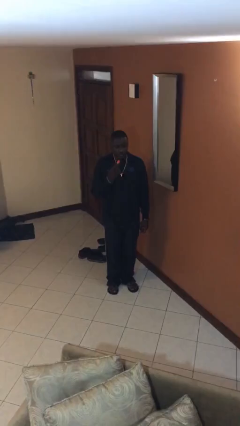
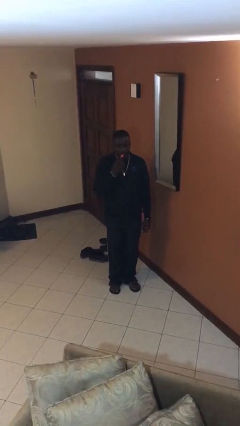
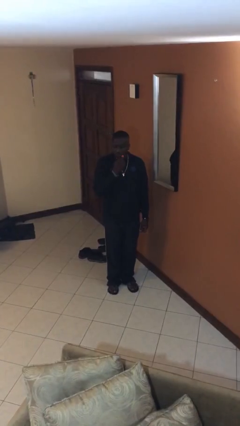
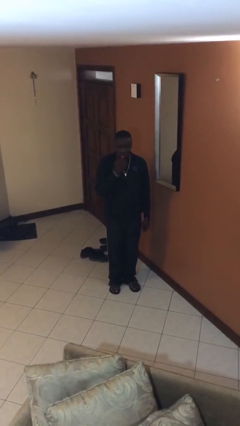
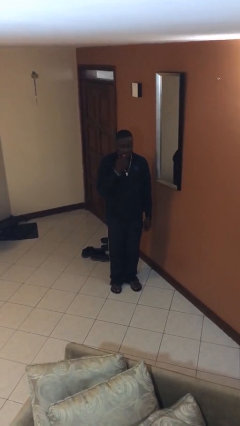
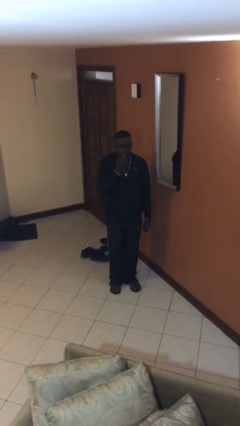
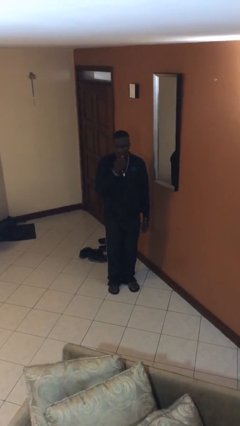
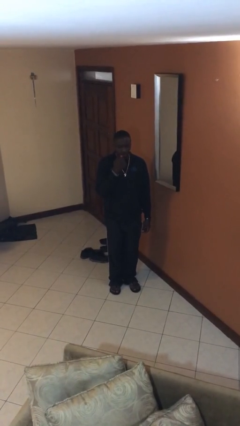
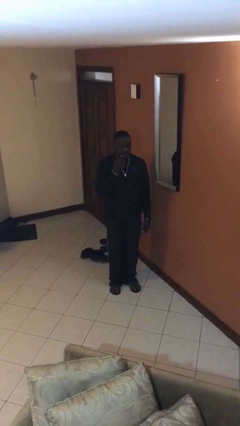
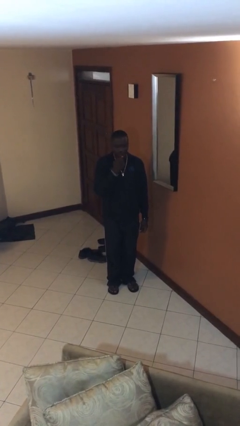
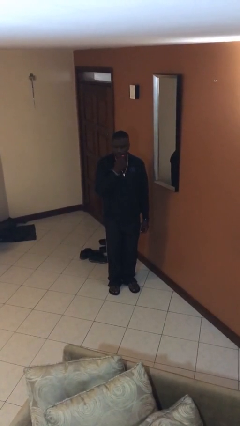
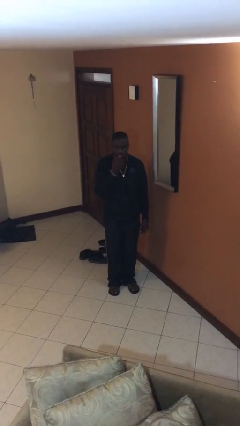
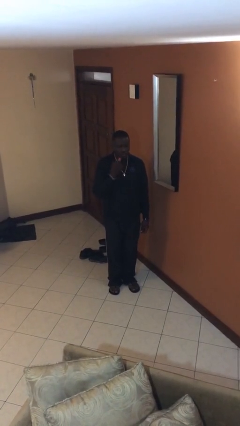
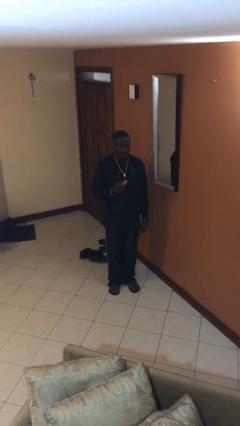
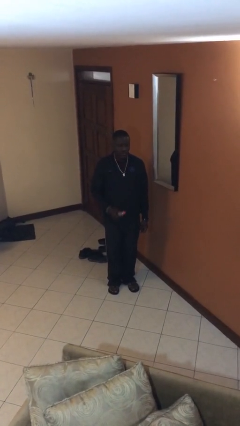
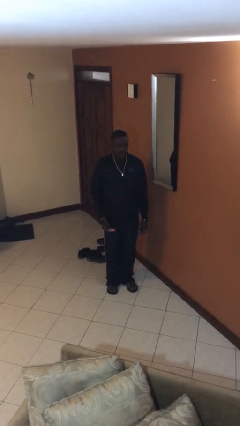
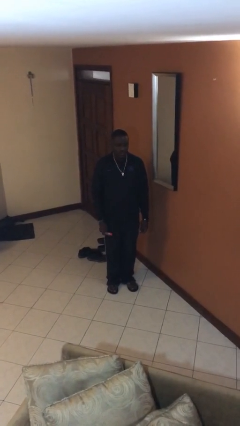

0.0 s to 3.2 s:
person applies lip makeup

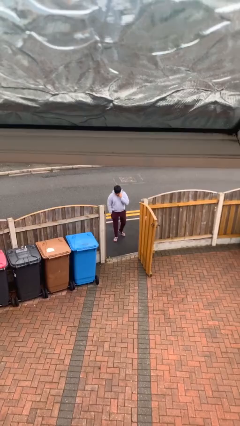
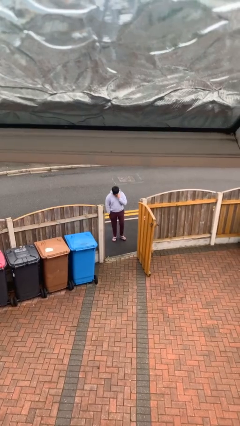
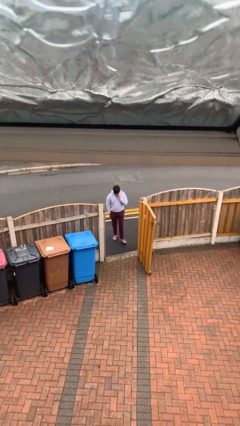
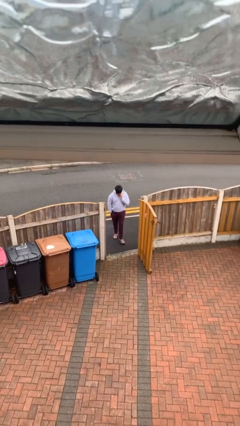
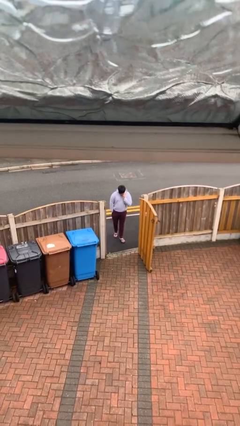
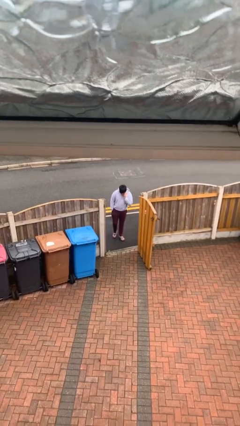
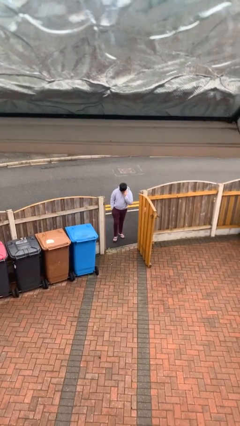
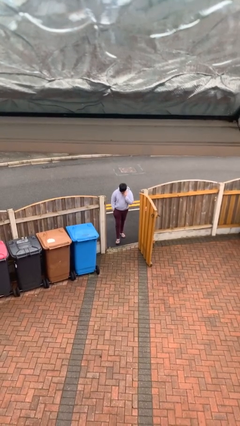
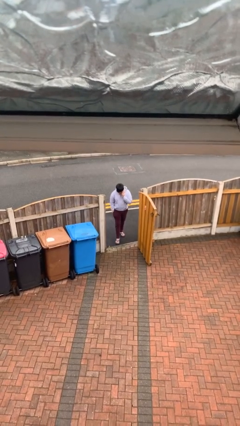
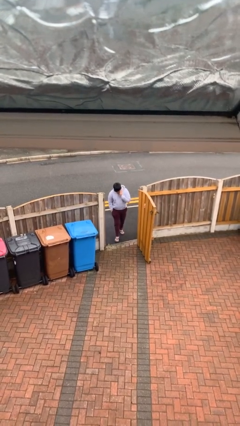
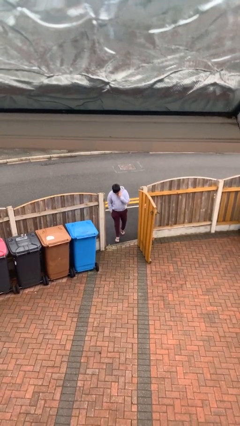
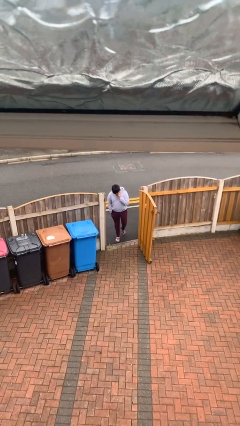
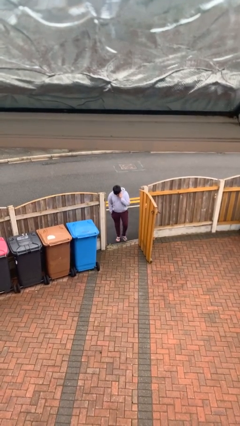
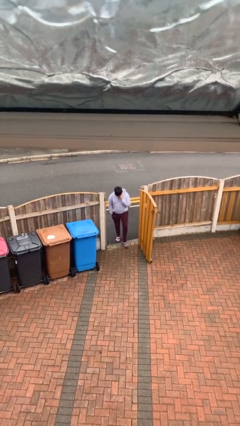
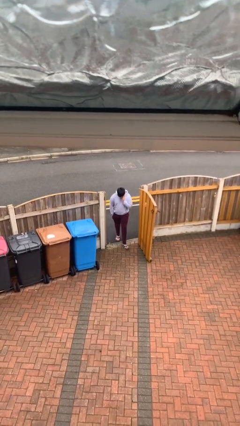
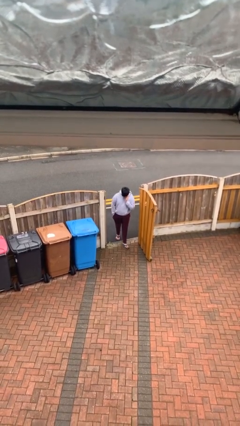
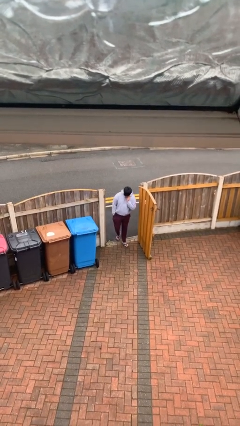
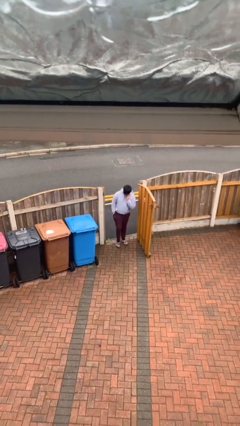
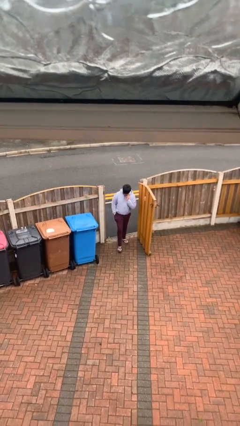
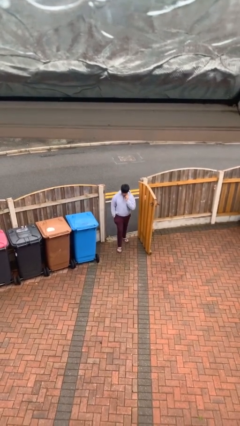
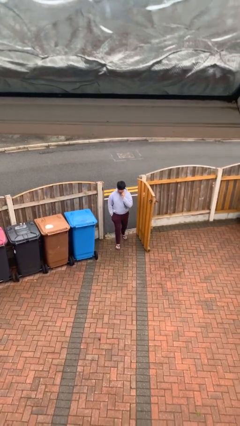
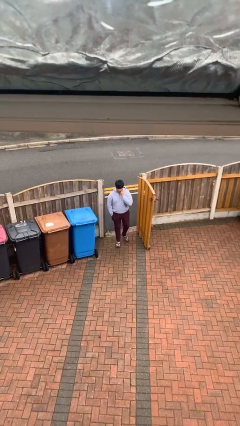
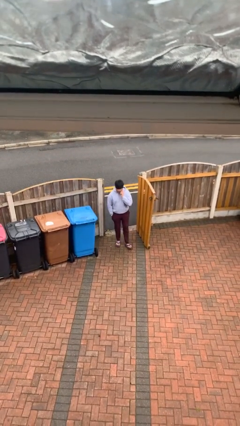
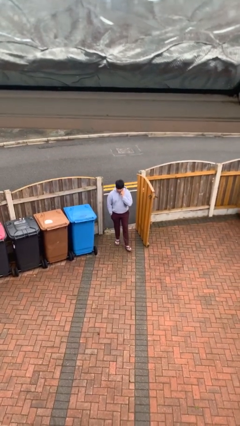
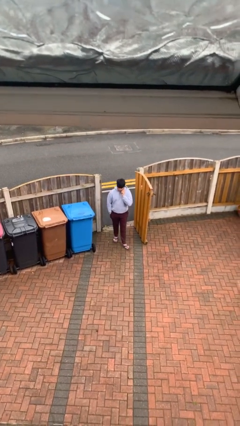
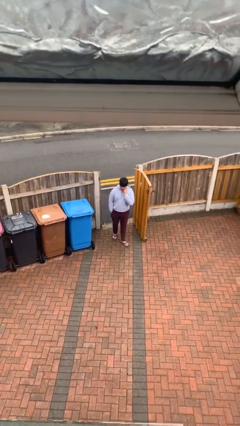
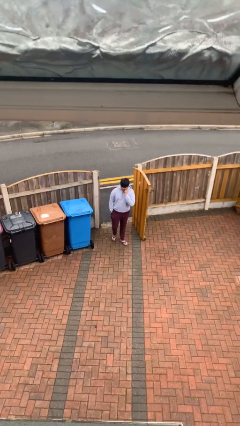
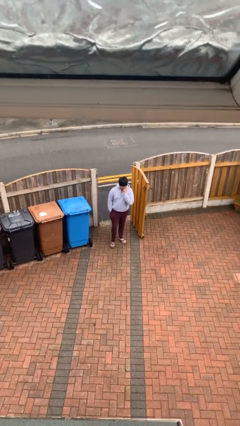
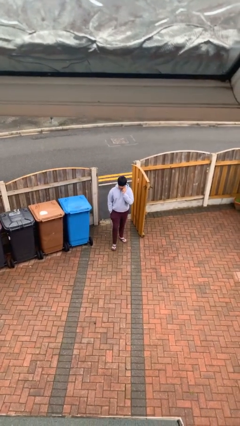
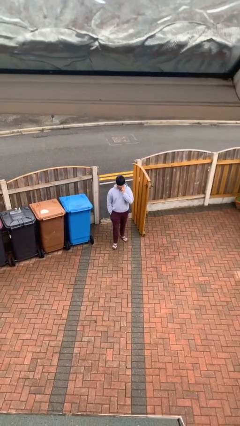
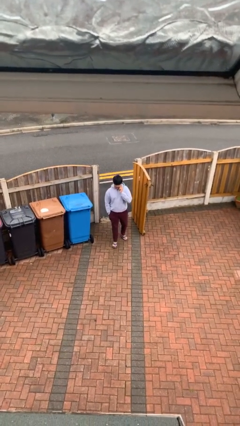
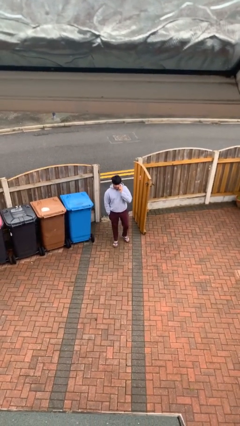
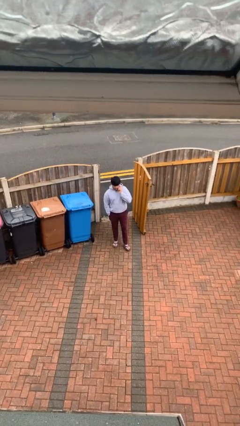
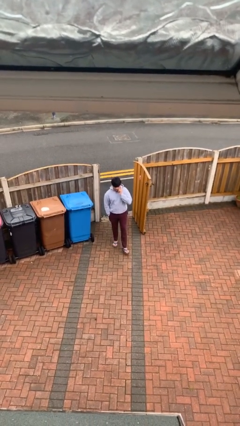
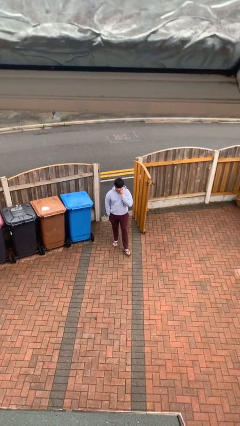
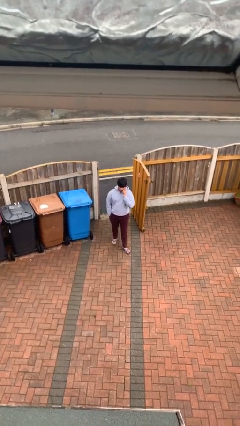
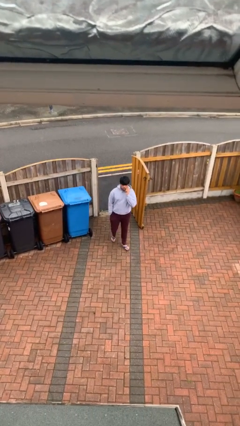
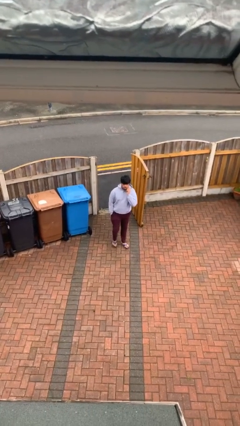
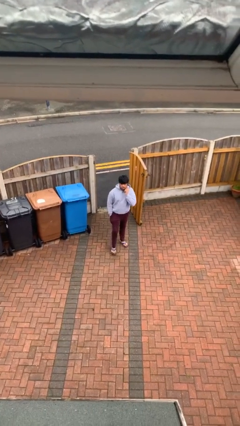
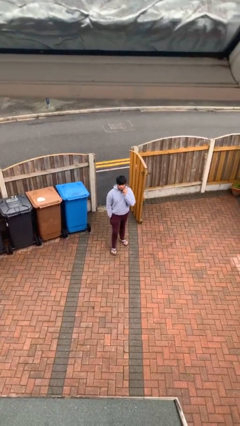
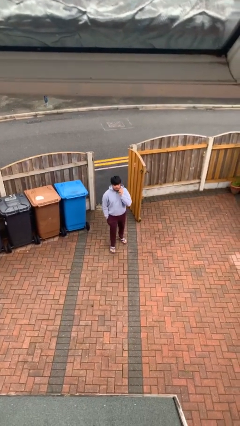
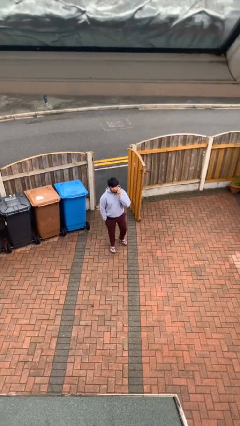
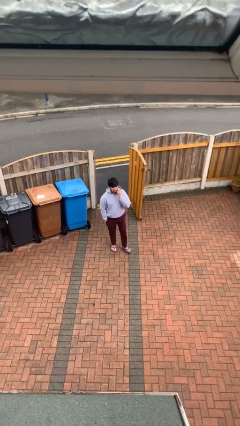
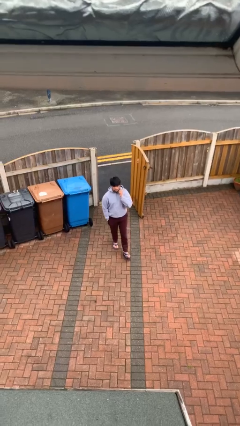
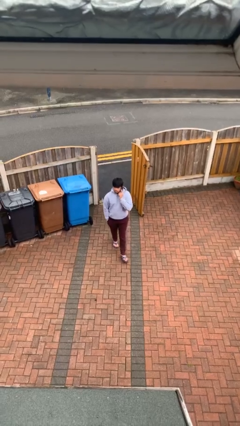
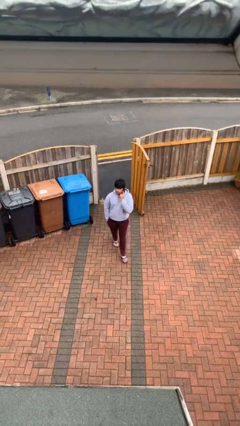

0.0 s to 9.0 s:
person enters scene through structure

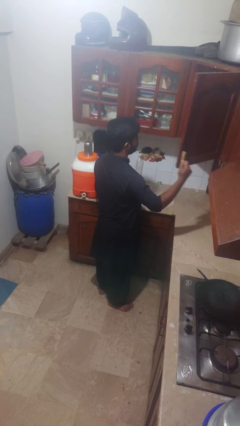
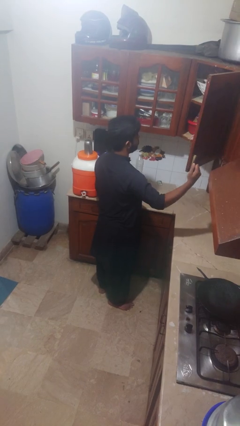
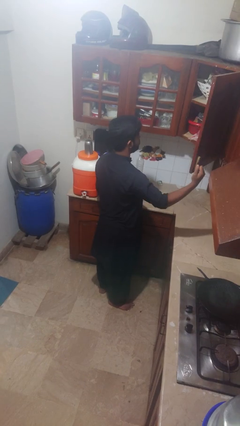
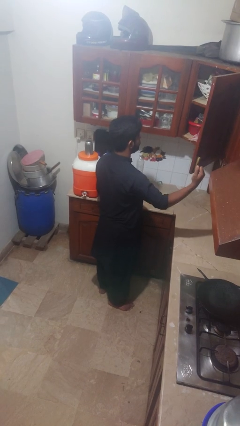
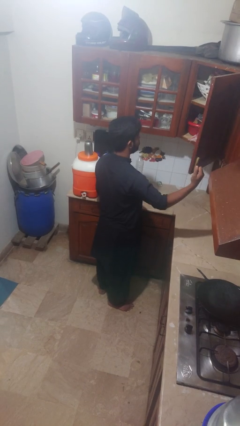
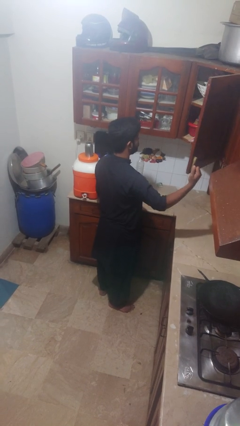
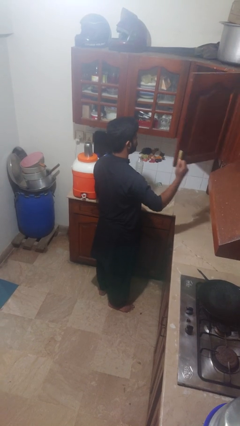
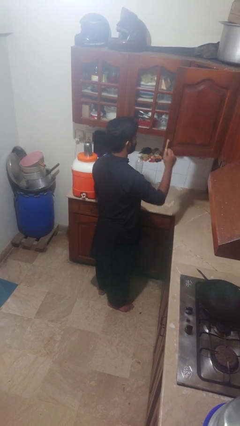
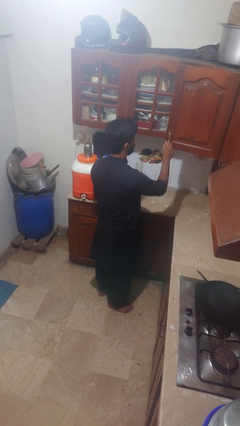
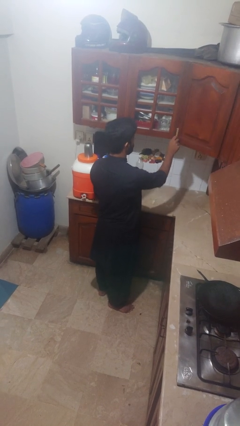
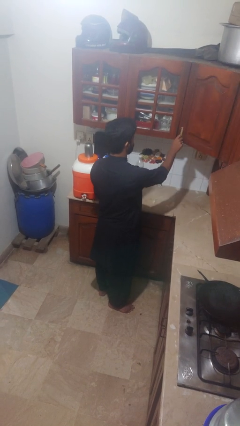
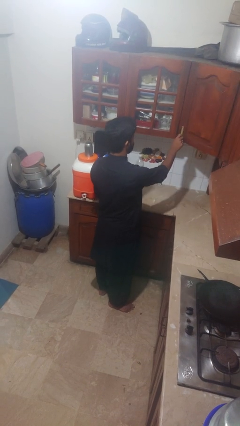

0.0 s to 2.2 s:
person closes cabinet

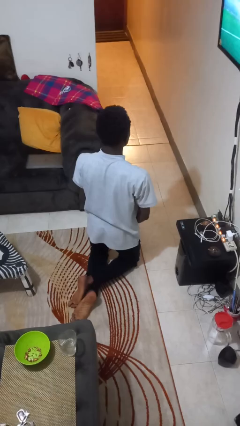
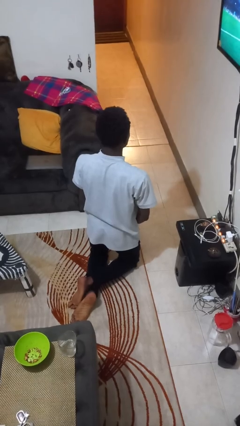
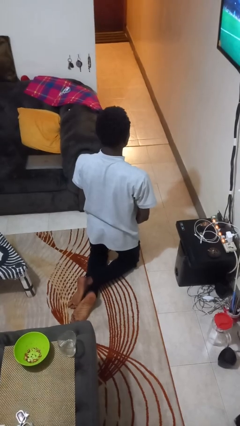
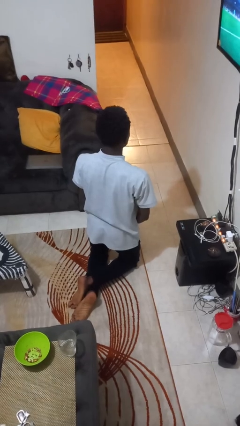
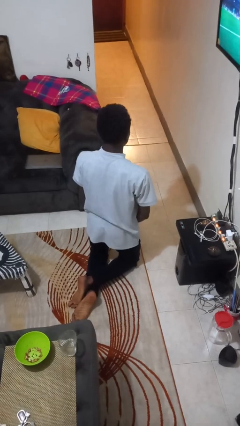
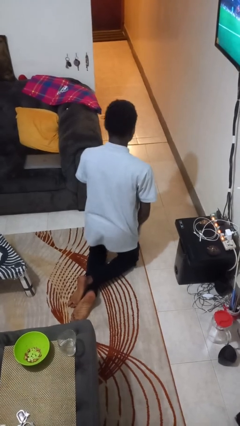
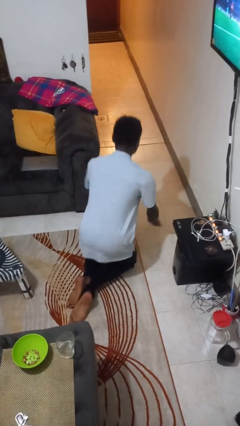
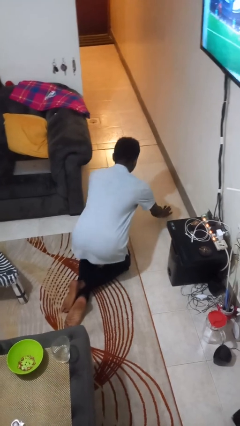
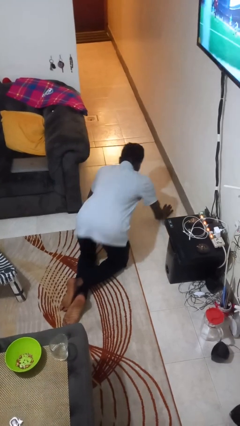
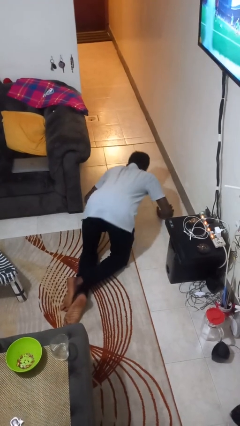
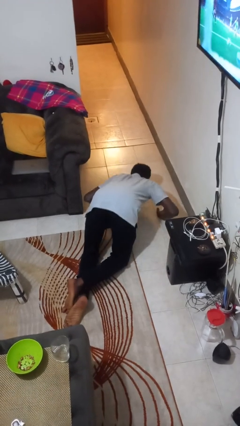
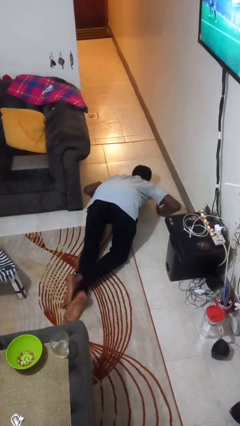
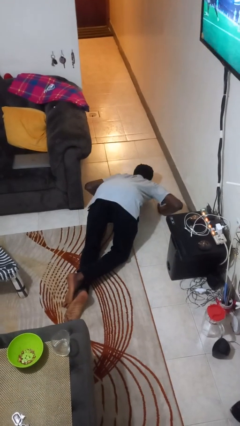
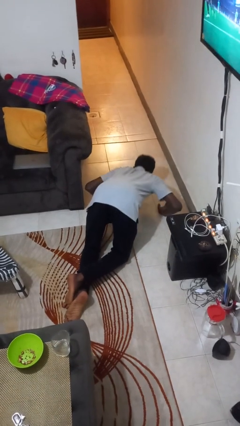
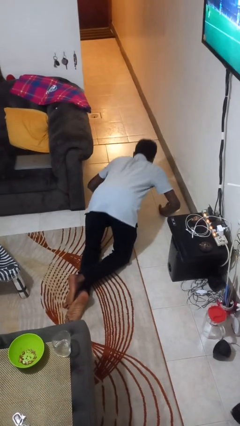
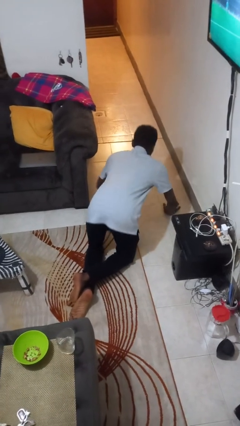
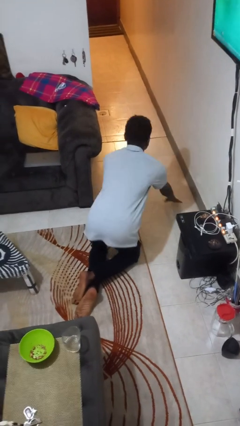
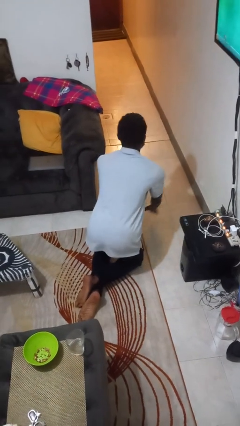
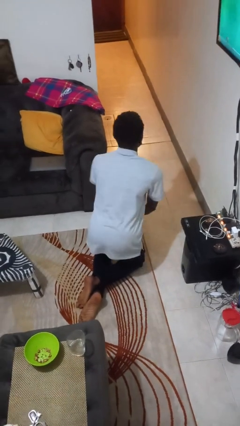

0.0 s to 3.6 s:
person exercises with pushup
